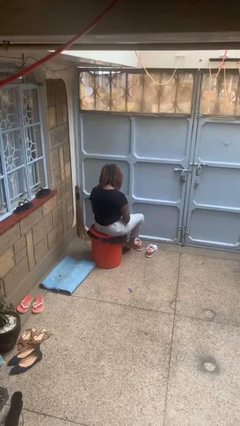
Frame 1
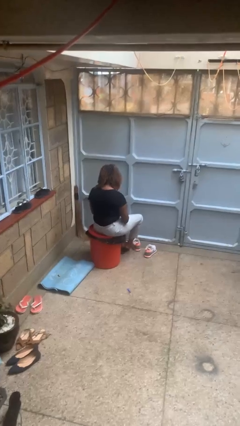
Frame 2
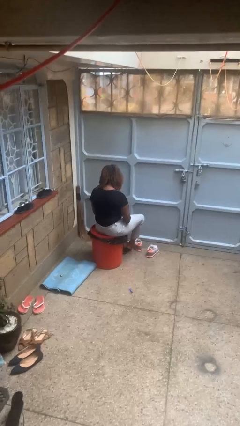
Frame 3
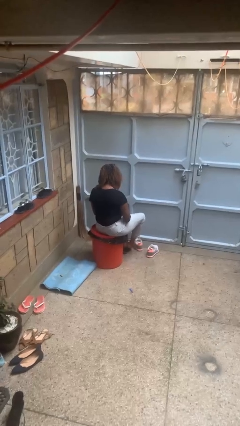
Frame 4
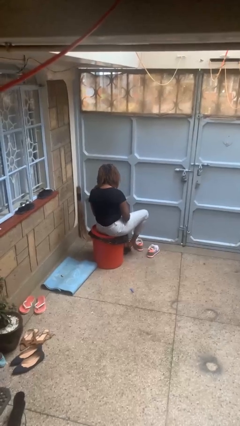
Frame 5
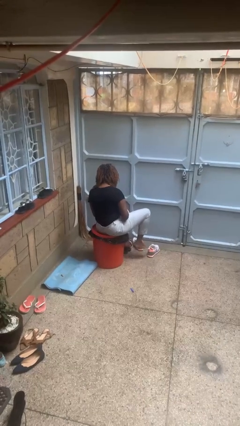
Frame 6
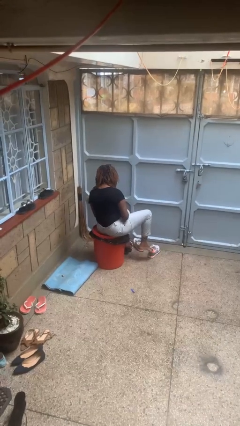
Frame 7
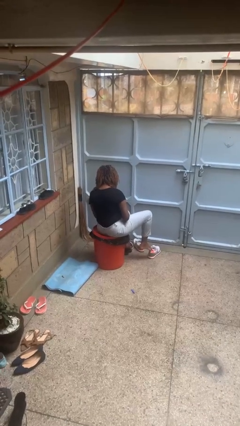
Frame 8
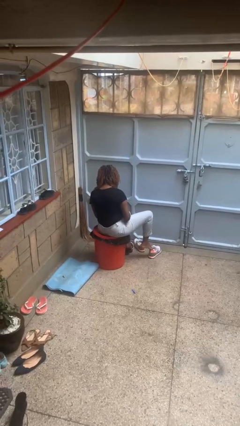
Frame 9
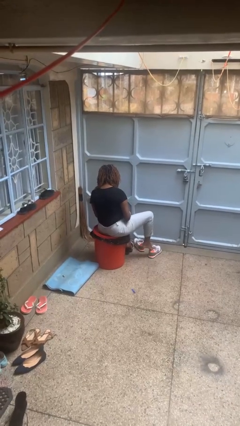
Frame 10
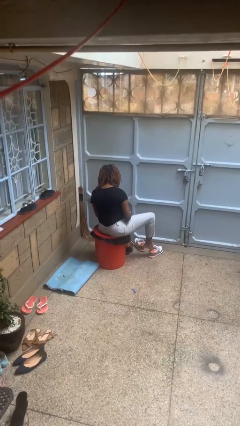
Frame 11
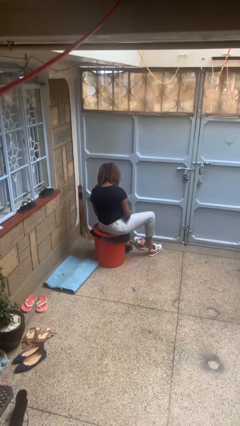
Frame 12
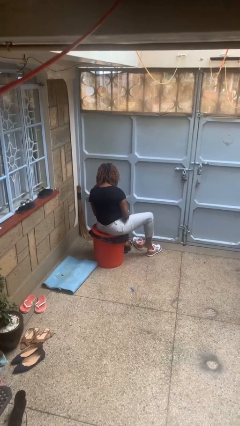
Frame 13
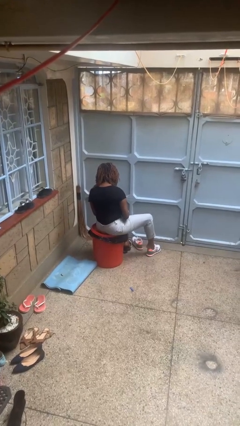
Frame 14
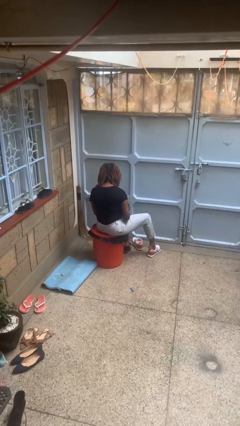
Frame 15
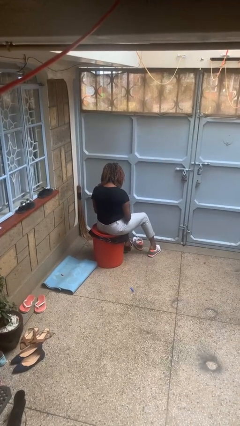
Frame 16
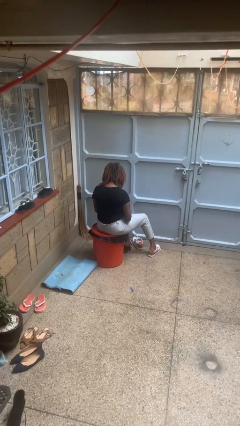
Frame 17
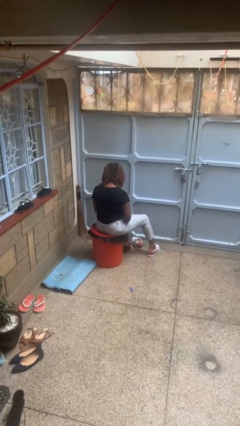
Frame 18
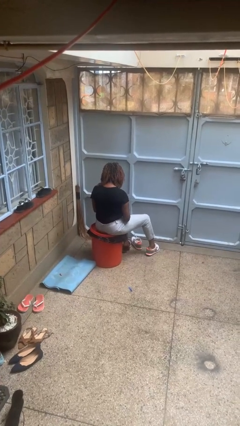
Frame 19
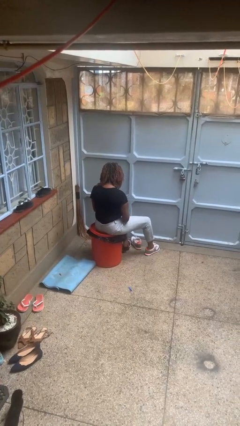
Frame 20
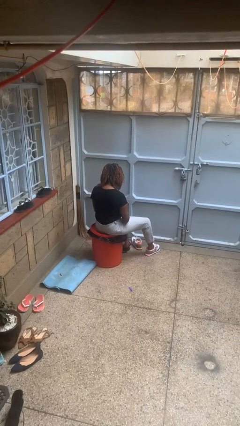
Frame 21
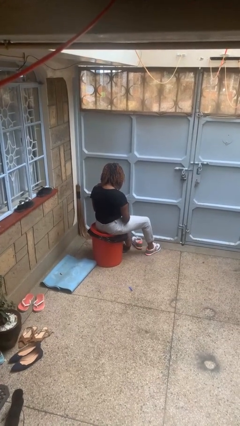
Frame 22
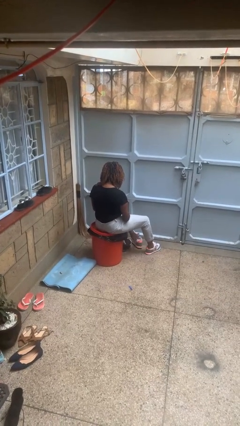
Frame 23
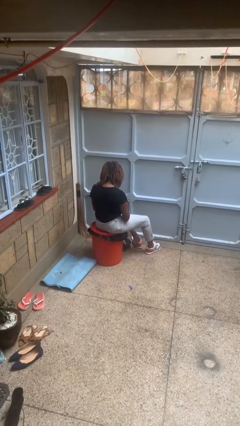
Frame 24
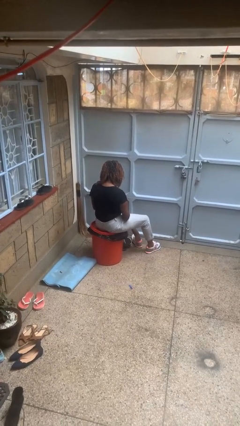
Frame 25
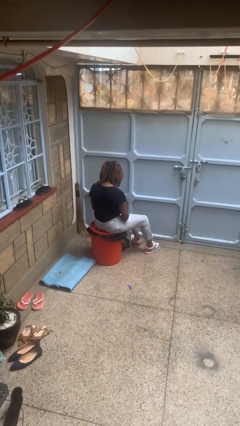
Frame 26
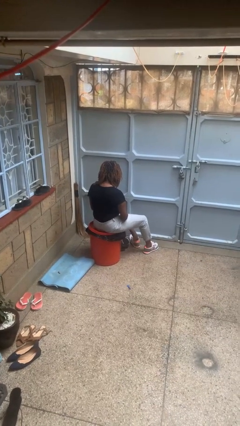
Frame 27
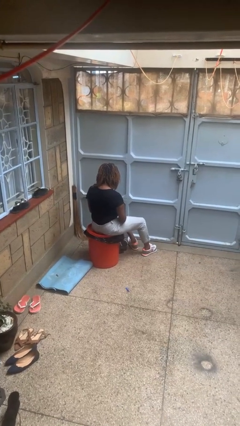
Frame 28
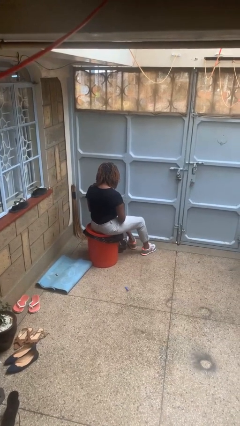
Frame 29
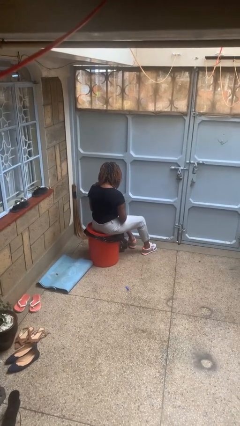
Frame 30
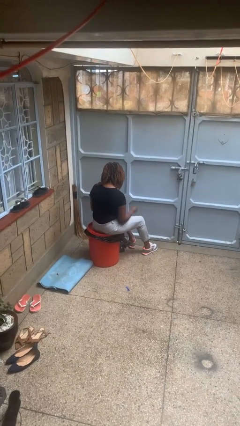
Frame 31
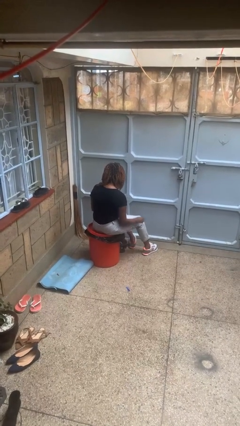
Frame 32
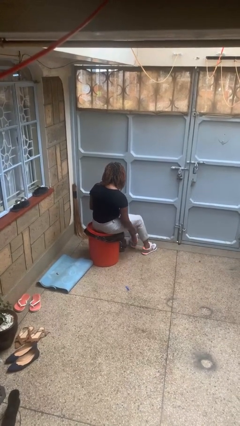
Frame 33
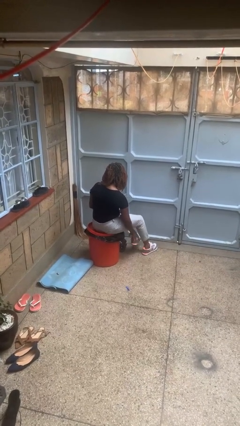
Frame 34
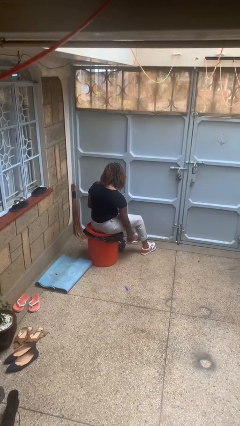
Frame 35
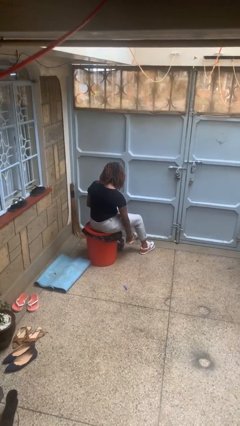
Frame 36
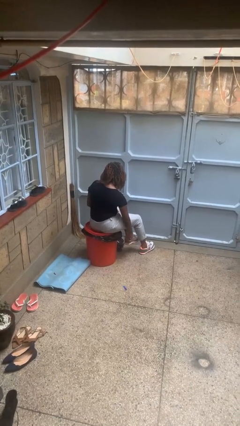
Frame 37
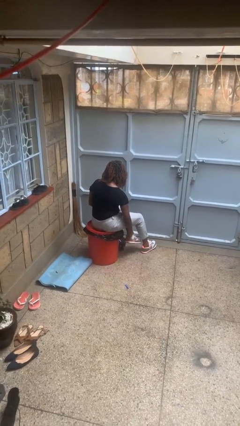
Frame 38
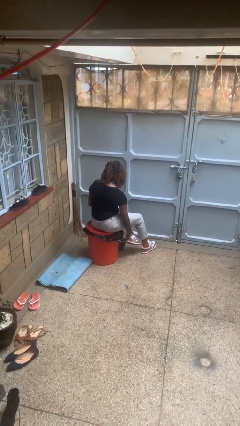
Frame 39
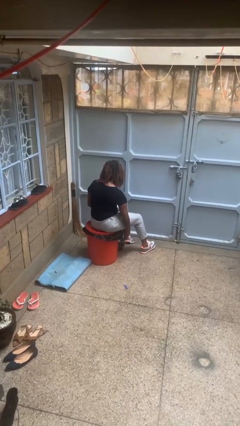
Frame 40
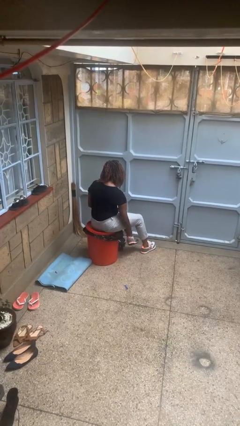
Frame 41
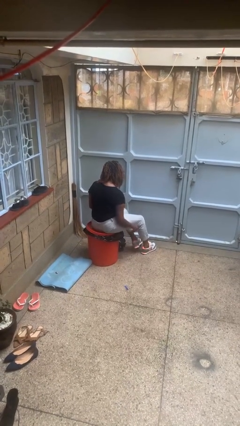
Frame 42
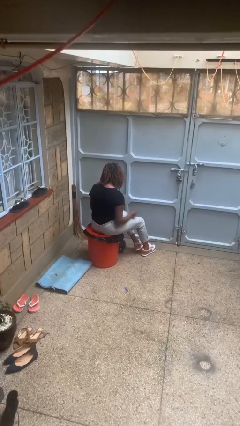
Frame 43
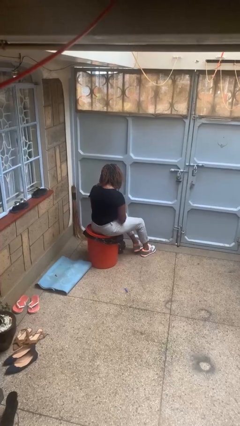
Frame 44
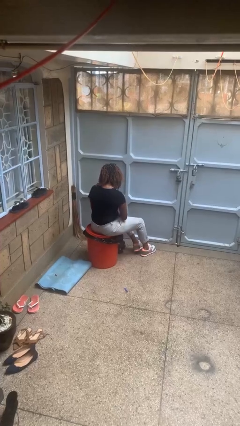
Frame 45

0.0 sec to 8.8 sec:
person puts on shoes

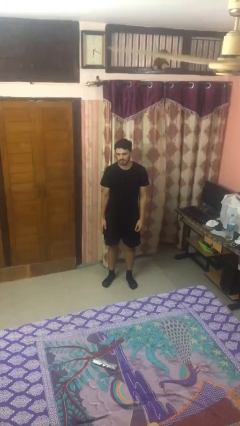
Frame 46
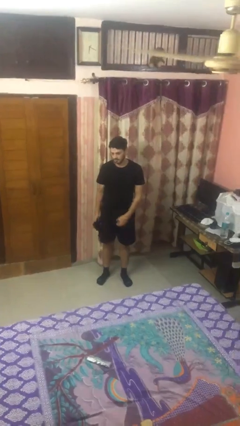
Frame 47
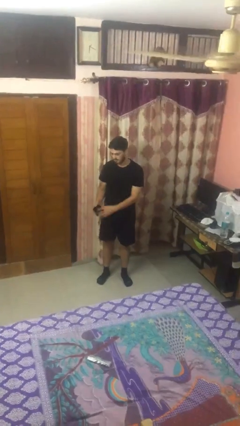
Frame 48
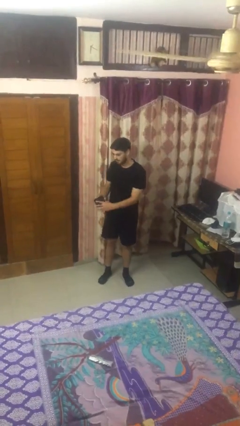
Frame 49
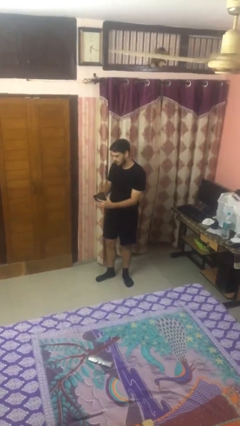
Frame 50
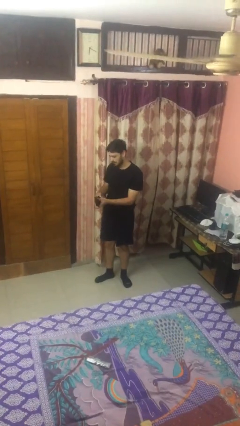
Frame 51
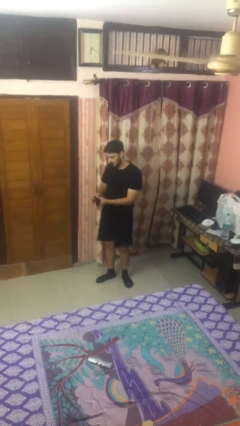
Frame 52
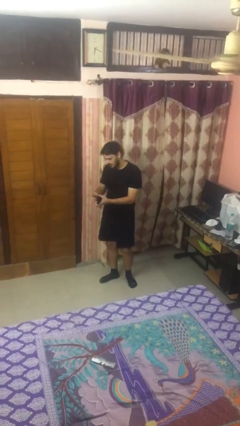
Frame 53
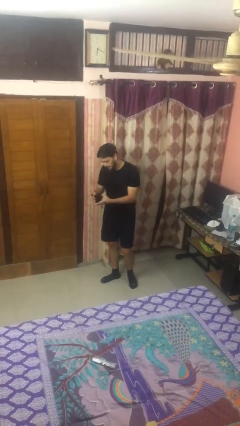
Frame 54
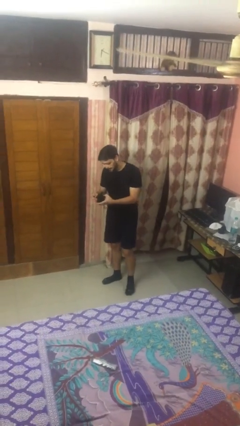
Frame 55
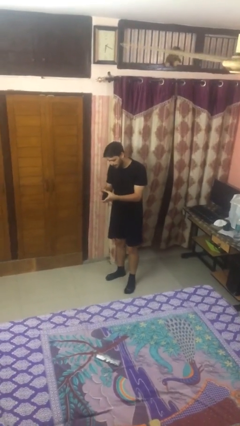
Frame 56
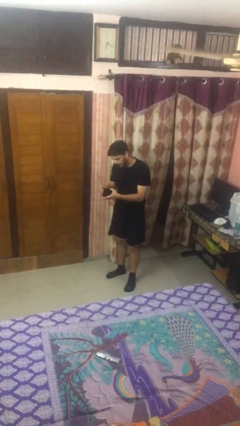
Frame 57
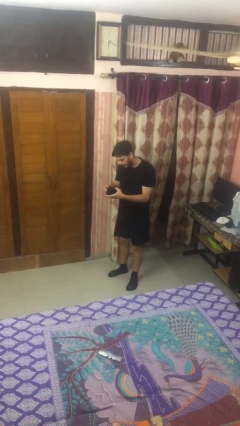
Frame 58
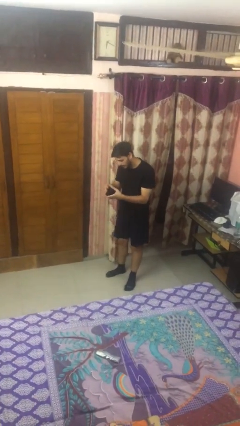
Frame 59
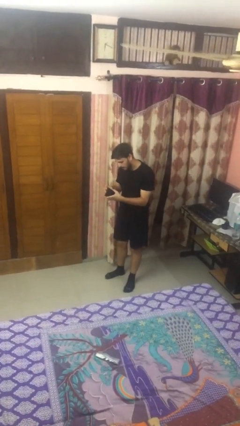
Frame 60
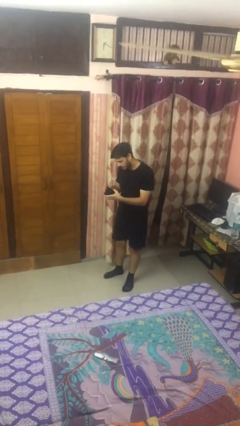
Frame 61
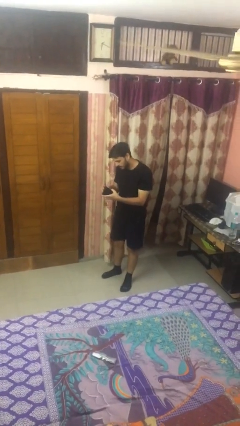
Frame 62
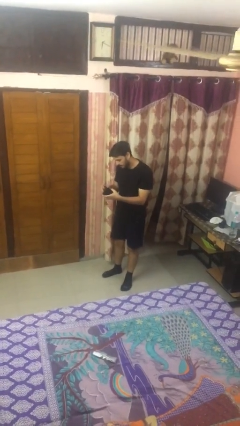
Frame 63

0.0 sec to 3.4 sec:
person searches in purse

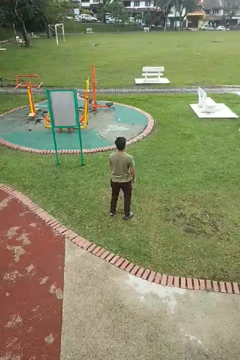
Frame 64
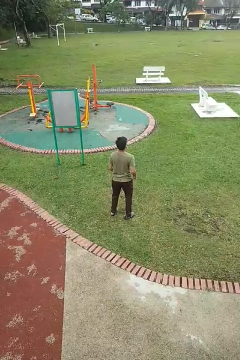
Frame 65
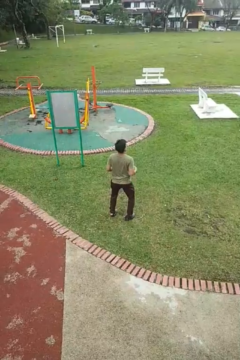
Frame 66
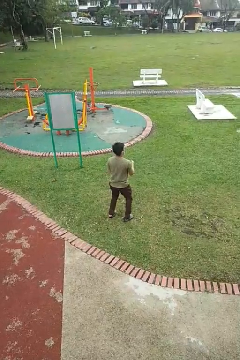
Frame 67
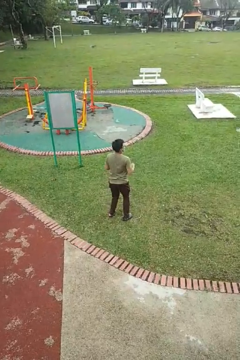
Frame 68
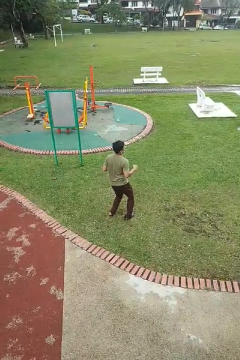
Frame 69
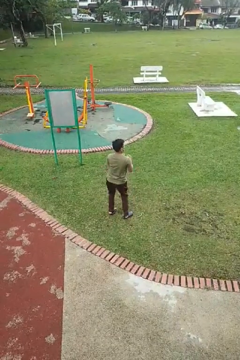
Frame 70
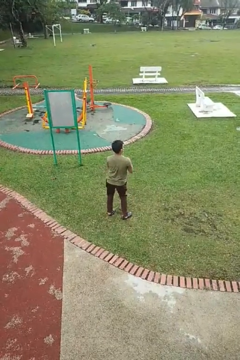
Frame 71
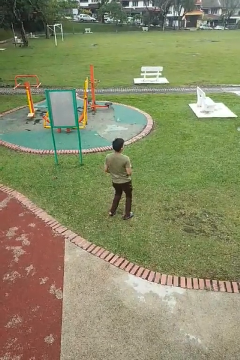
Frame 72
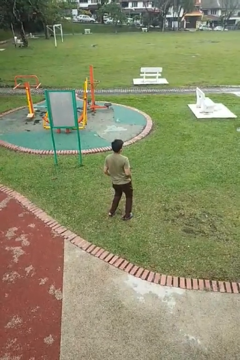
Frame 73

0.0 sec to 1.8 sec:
person dances in place

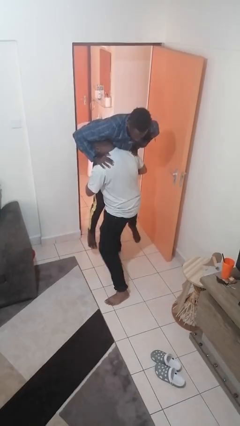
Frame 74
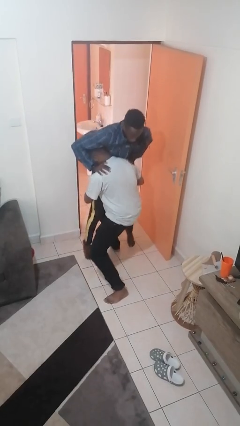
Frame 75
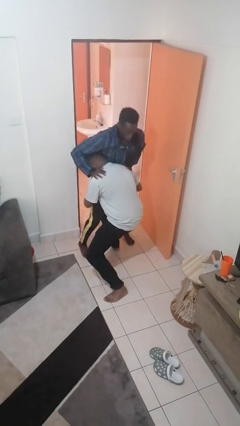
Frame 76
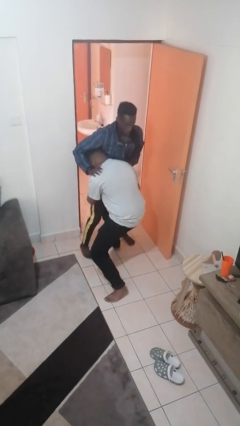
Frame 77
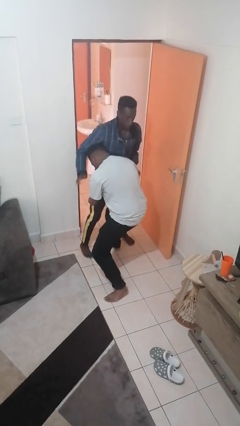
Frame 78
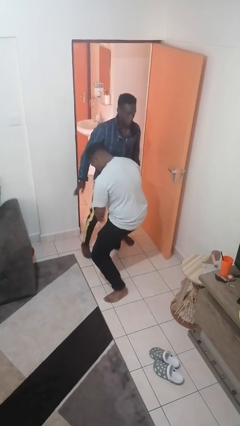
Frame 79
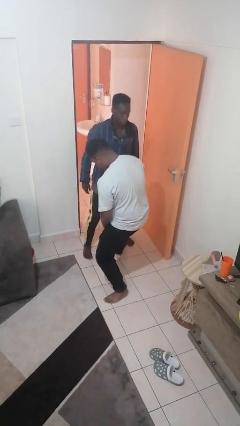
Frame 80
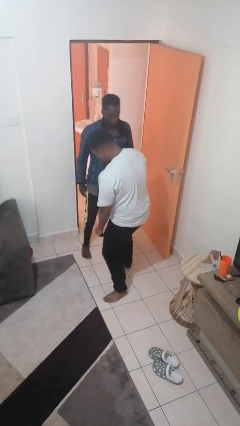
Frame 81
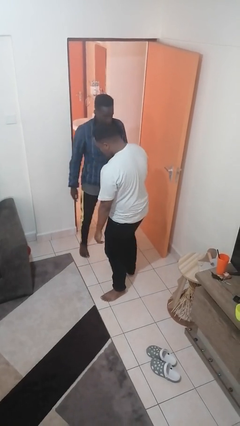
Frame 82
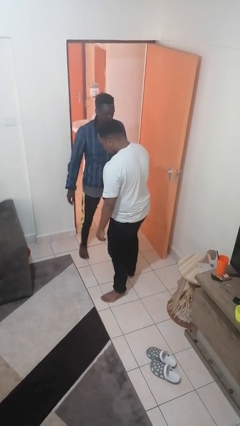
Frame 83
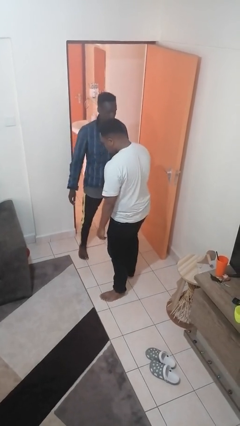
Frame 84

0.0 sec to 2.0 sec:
person puts down person

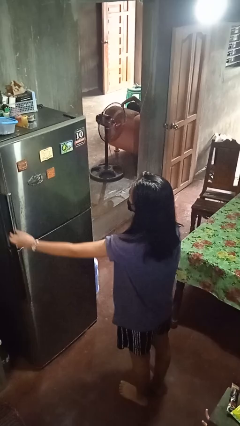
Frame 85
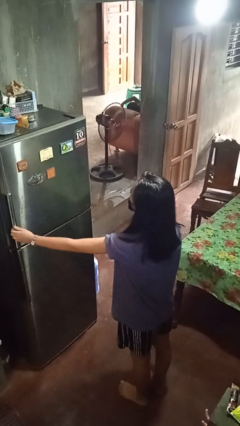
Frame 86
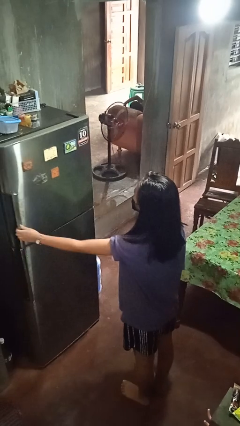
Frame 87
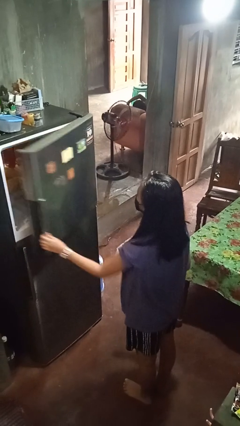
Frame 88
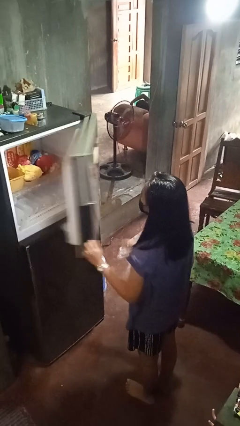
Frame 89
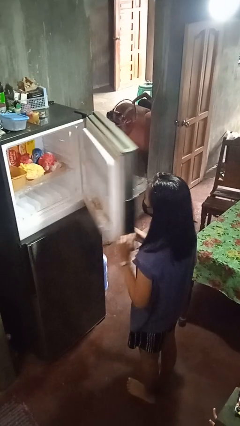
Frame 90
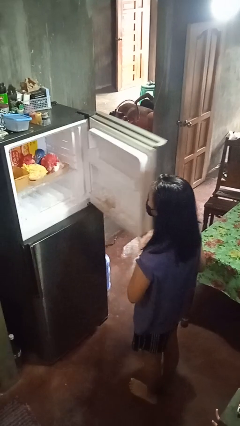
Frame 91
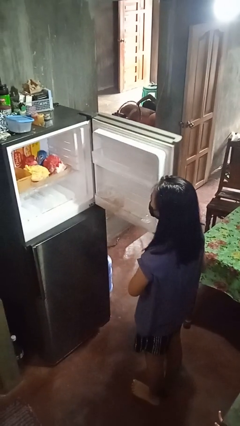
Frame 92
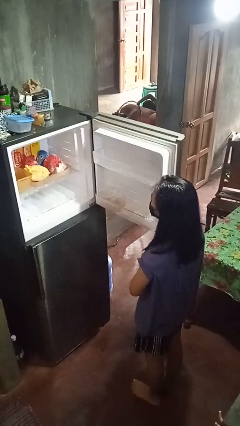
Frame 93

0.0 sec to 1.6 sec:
person opens refrigerator

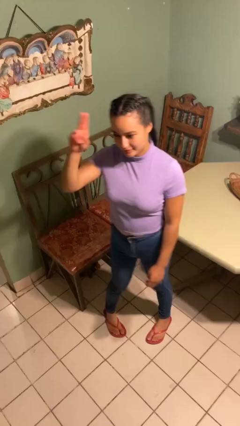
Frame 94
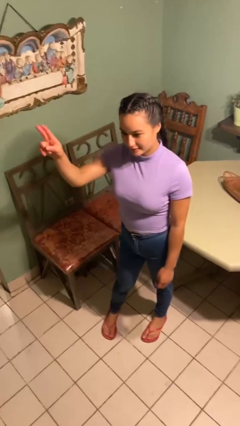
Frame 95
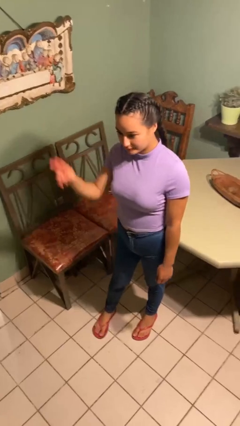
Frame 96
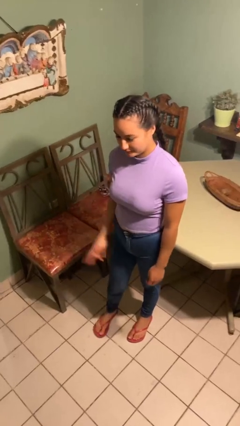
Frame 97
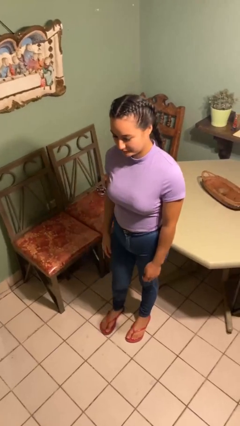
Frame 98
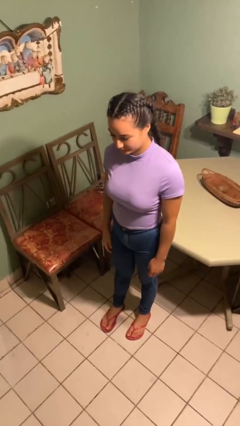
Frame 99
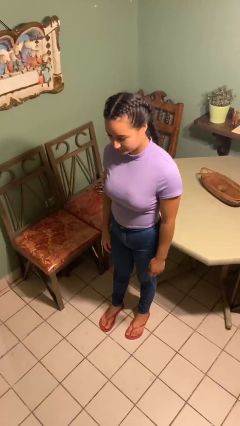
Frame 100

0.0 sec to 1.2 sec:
person salutes
